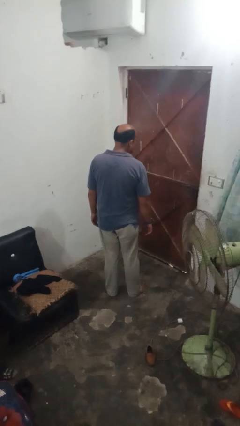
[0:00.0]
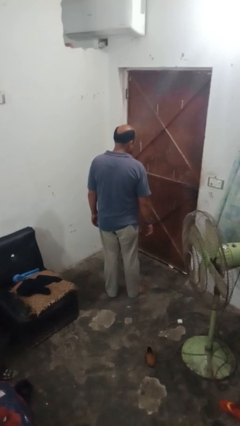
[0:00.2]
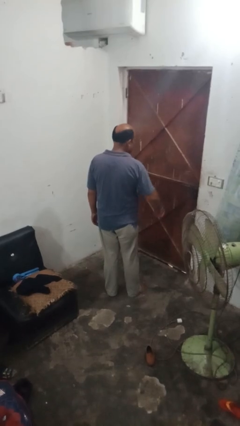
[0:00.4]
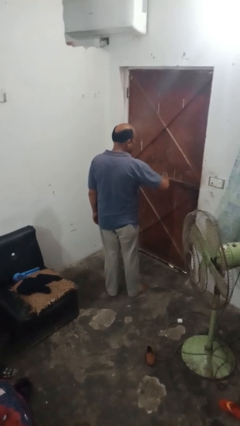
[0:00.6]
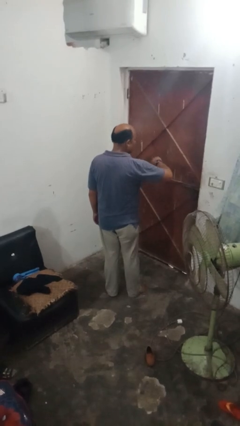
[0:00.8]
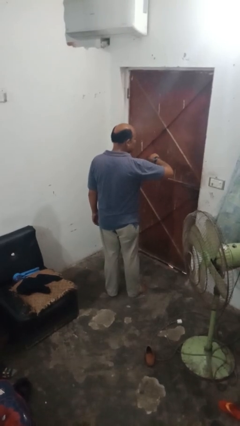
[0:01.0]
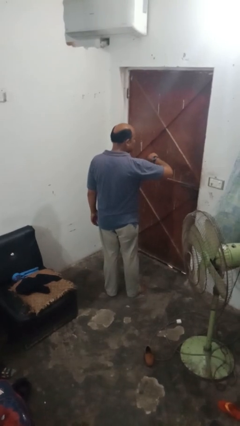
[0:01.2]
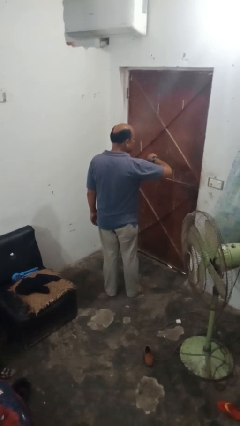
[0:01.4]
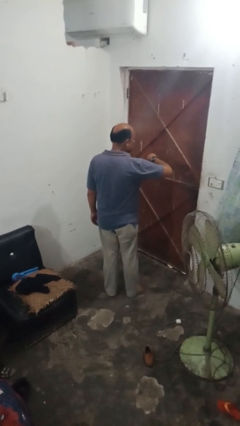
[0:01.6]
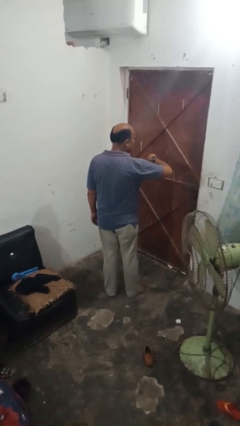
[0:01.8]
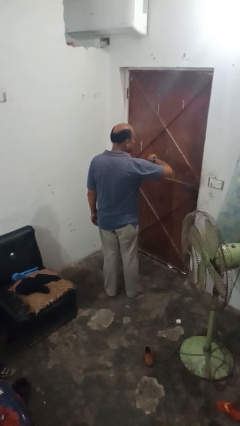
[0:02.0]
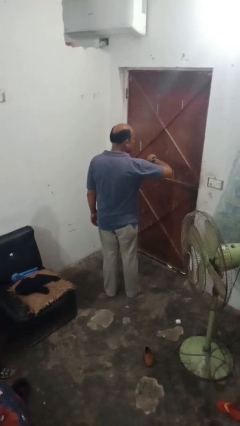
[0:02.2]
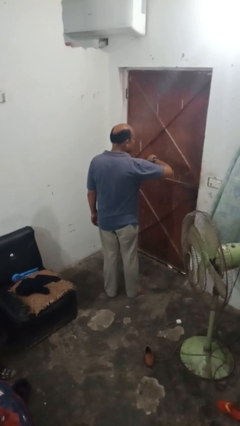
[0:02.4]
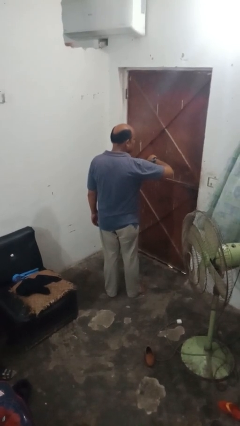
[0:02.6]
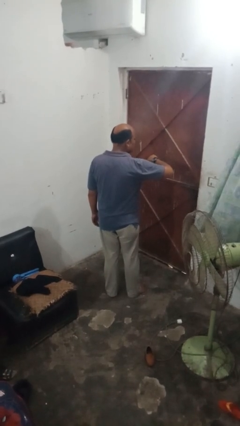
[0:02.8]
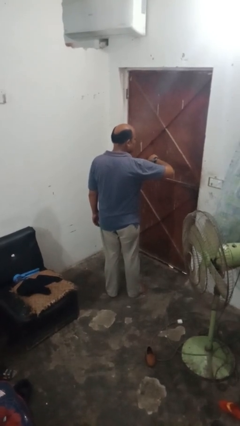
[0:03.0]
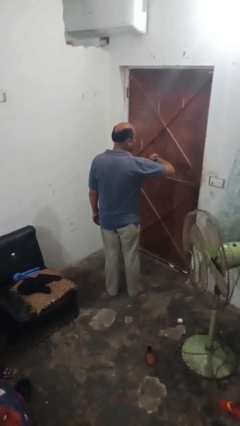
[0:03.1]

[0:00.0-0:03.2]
person puts on wristwatch

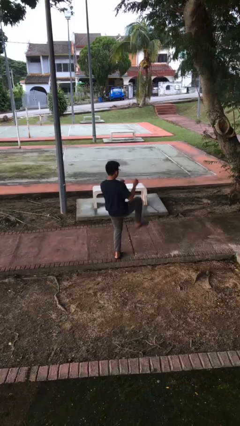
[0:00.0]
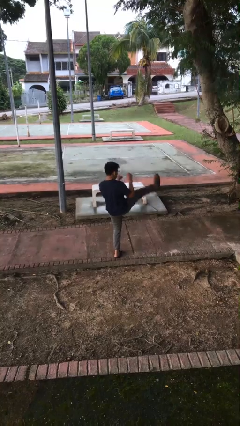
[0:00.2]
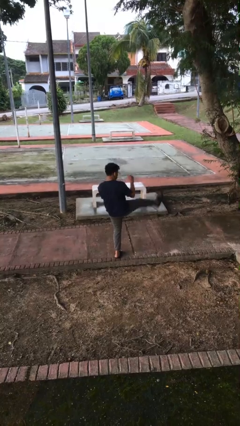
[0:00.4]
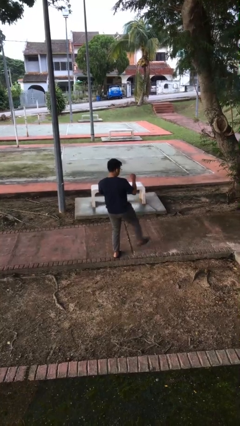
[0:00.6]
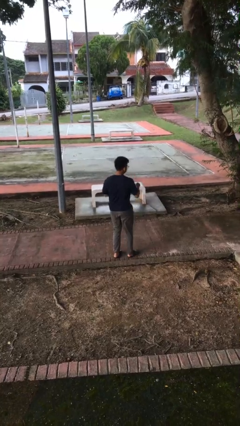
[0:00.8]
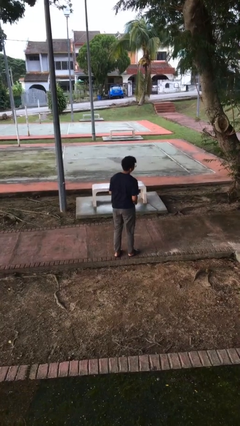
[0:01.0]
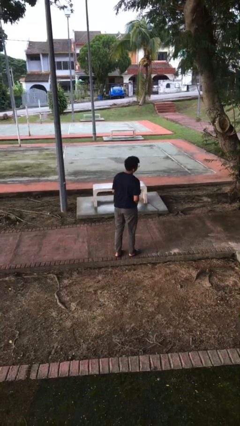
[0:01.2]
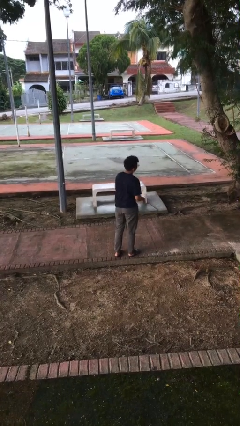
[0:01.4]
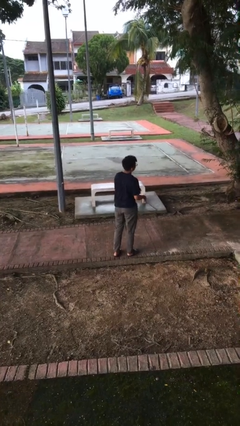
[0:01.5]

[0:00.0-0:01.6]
person karate kicks

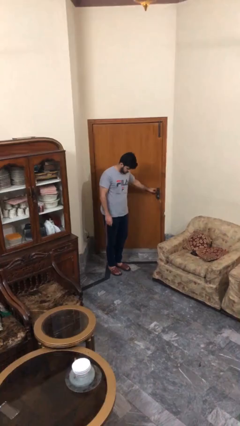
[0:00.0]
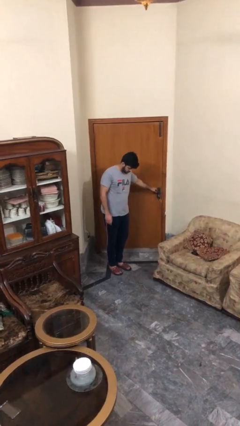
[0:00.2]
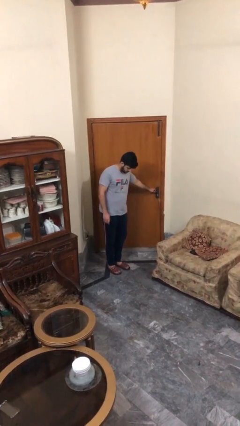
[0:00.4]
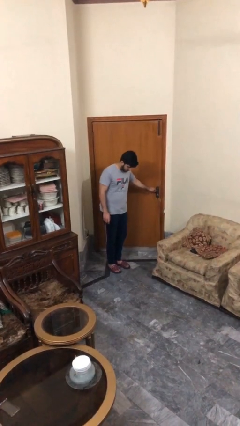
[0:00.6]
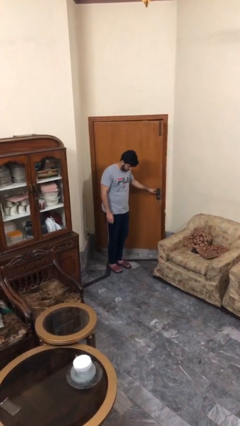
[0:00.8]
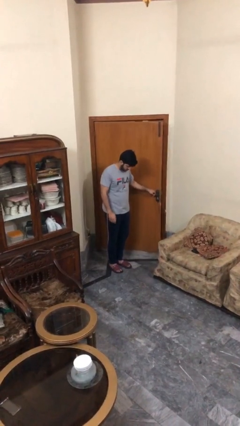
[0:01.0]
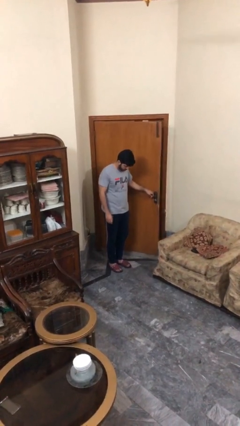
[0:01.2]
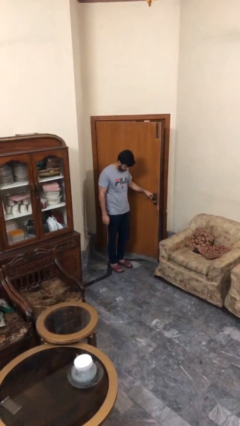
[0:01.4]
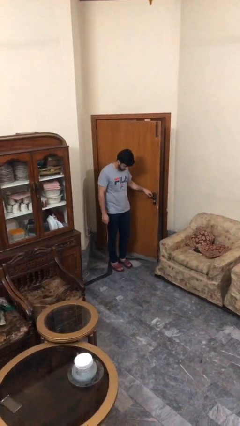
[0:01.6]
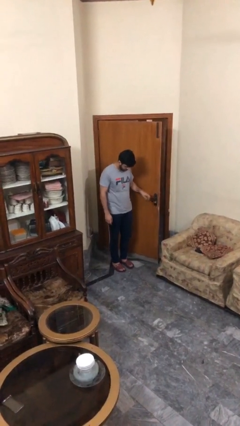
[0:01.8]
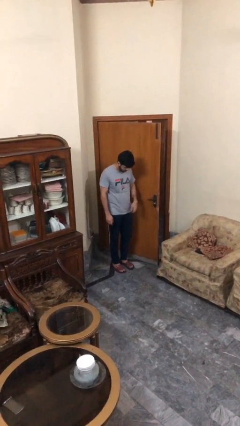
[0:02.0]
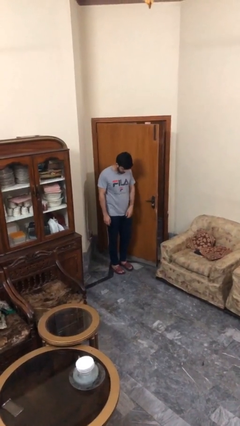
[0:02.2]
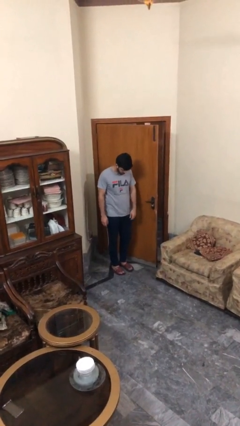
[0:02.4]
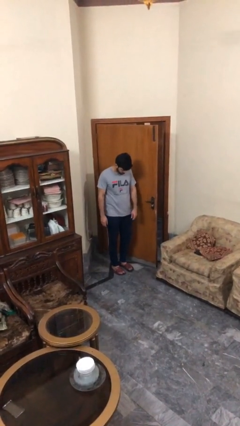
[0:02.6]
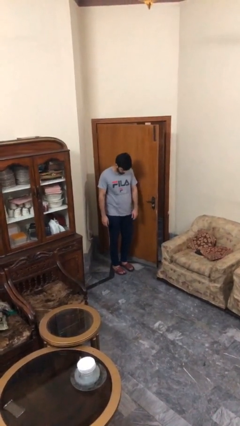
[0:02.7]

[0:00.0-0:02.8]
person opens facility door

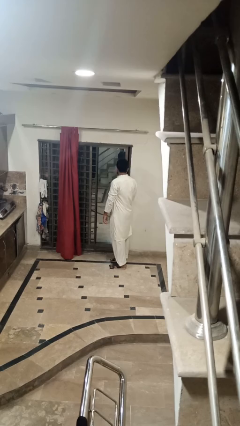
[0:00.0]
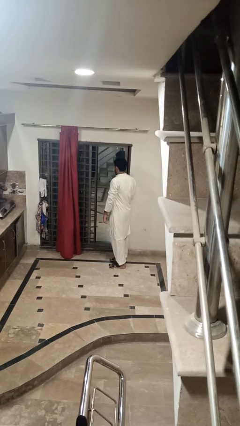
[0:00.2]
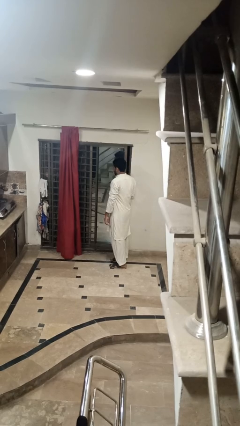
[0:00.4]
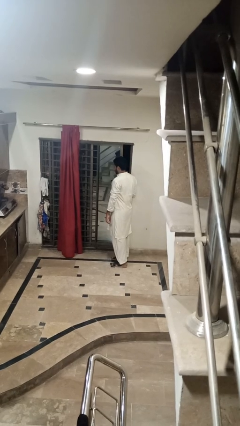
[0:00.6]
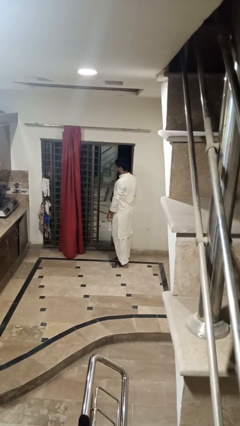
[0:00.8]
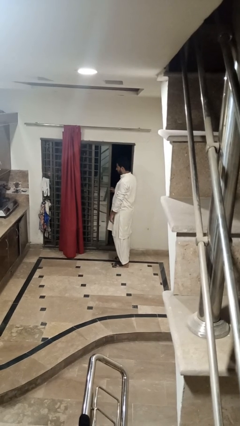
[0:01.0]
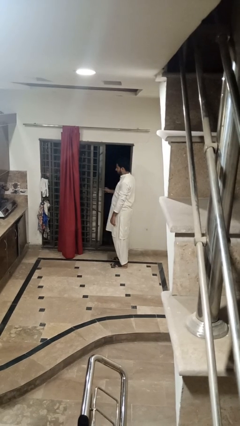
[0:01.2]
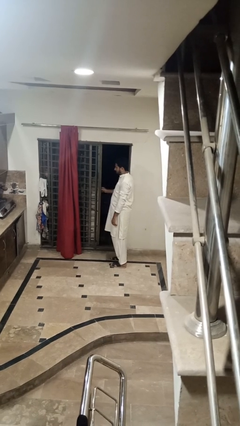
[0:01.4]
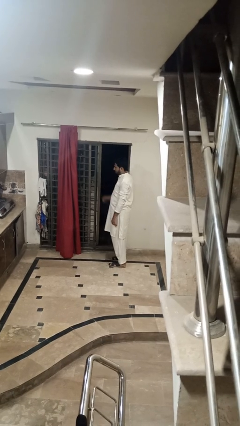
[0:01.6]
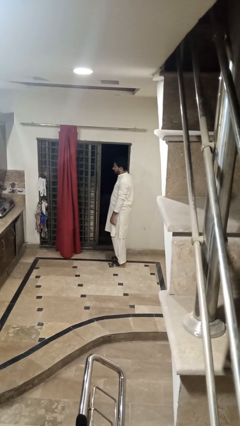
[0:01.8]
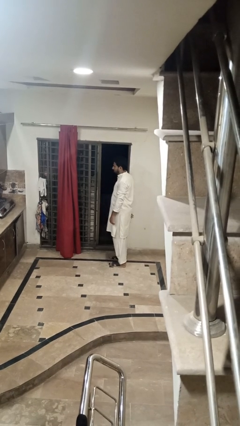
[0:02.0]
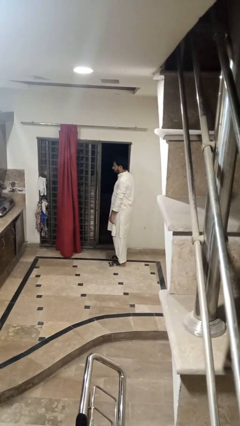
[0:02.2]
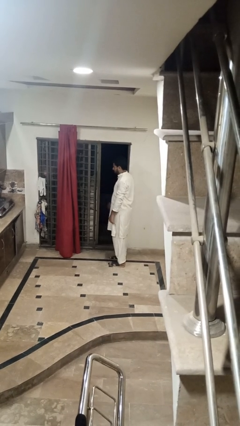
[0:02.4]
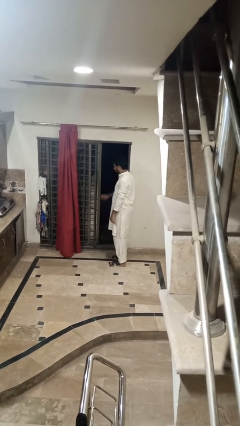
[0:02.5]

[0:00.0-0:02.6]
person opens home window

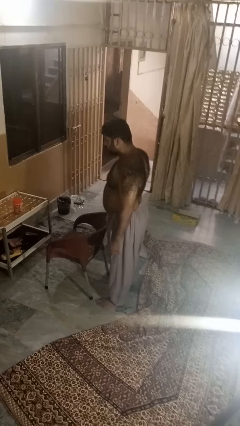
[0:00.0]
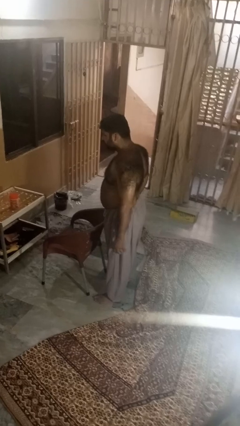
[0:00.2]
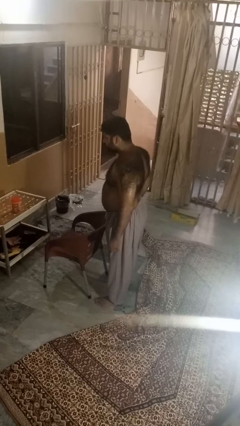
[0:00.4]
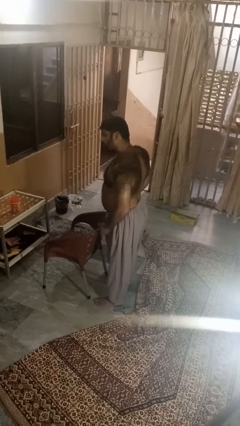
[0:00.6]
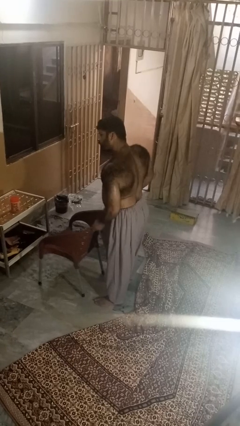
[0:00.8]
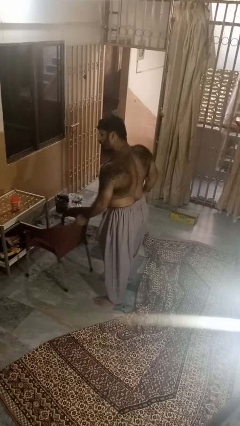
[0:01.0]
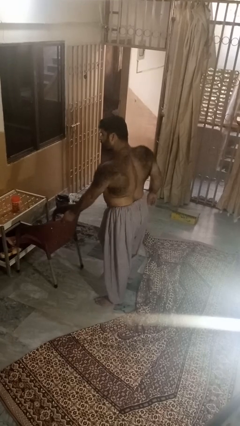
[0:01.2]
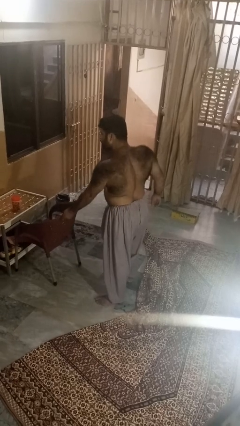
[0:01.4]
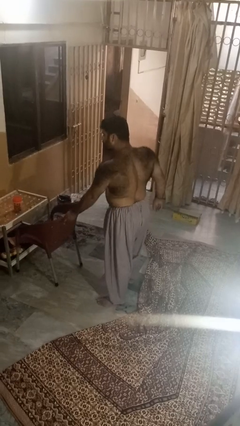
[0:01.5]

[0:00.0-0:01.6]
person pushes in chair

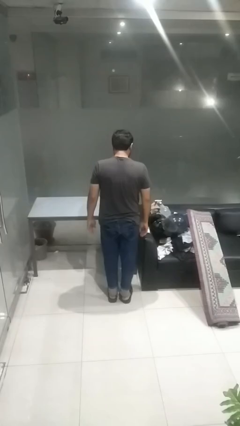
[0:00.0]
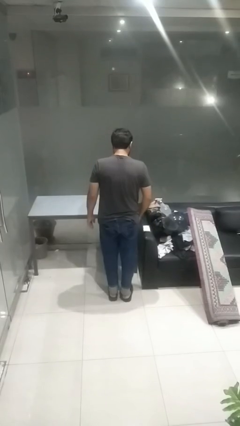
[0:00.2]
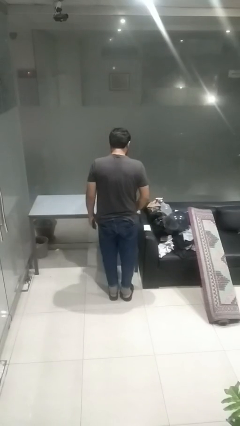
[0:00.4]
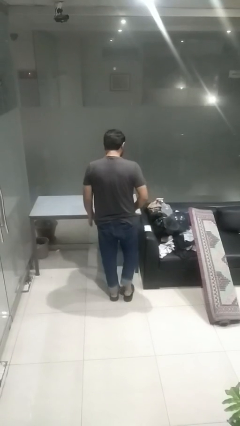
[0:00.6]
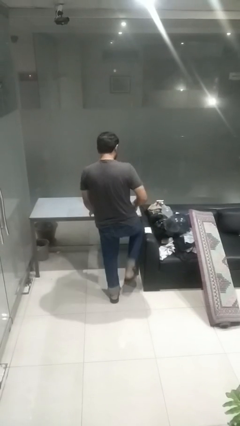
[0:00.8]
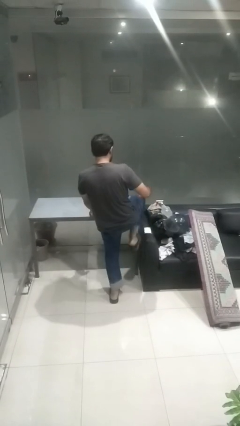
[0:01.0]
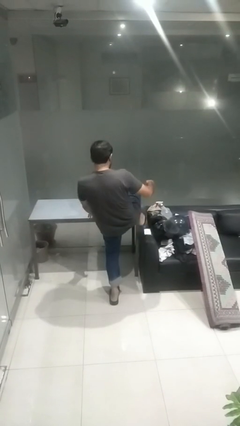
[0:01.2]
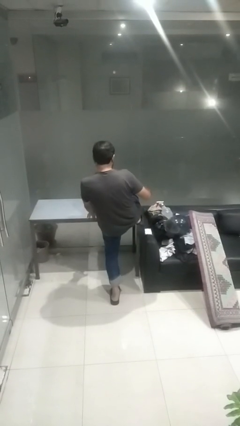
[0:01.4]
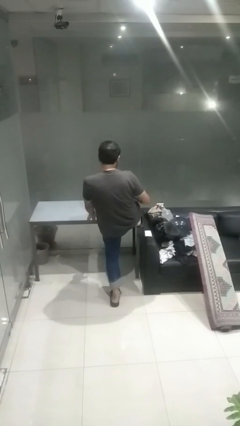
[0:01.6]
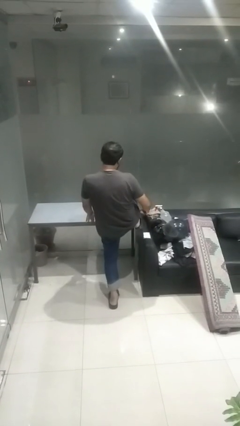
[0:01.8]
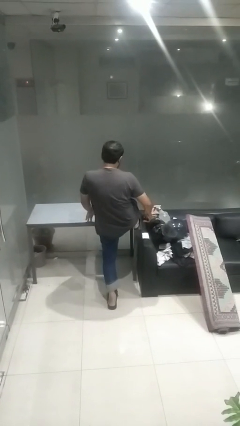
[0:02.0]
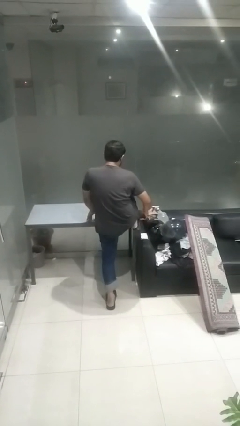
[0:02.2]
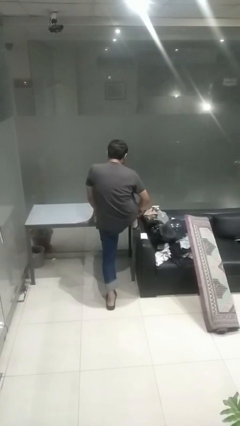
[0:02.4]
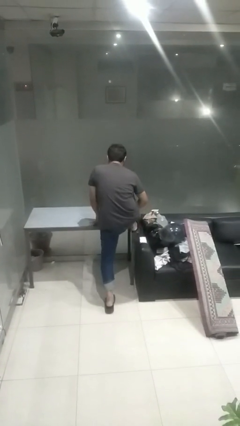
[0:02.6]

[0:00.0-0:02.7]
person climbs on table

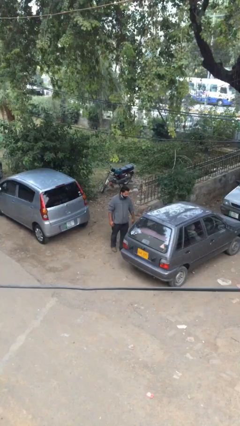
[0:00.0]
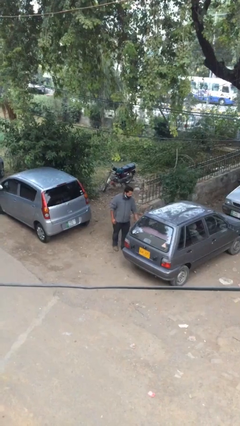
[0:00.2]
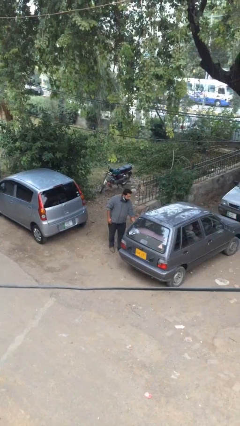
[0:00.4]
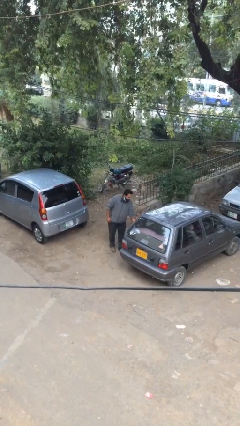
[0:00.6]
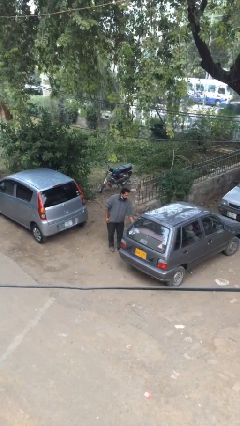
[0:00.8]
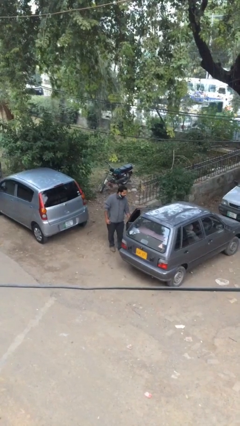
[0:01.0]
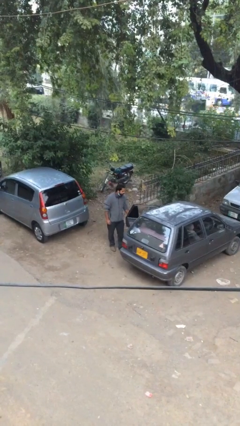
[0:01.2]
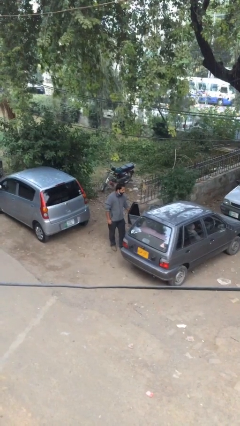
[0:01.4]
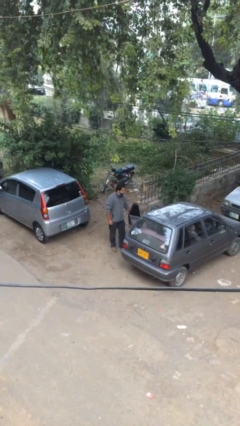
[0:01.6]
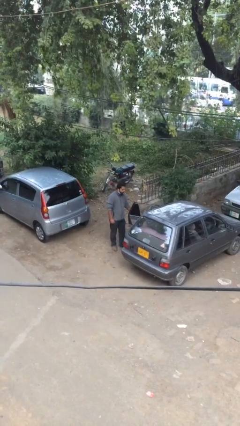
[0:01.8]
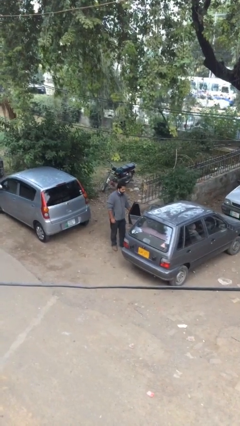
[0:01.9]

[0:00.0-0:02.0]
person opens car door

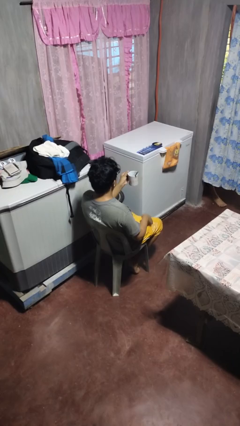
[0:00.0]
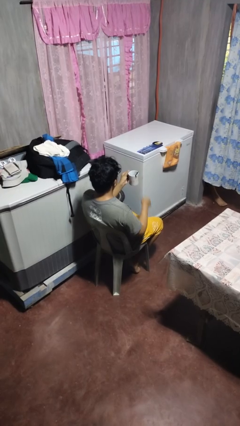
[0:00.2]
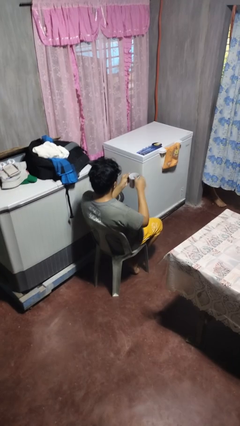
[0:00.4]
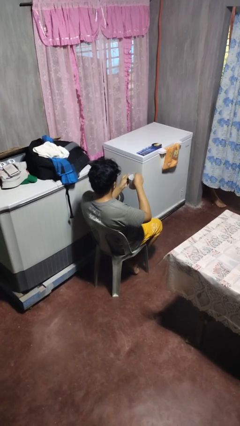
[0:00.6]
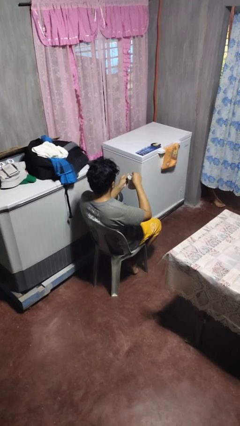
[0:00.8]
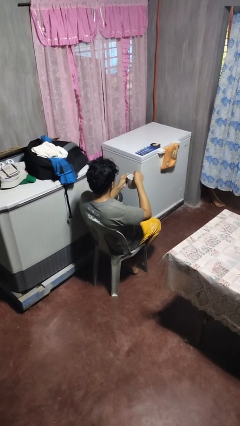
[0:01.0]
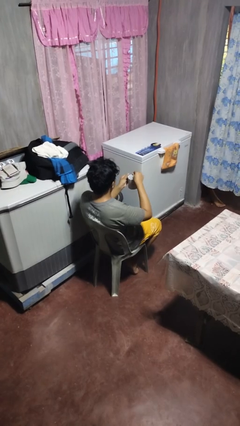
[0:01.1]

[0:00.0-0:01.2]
person stirs mug
